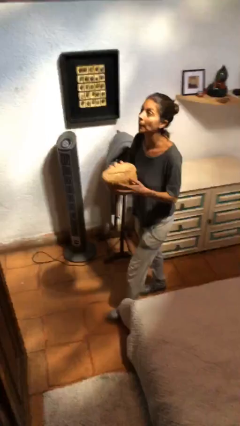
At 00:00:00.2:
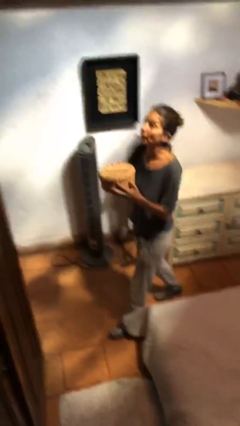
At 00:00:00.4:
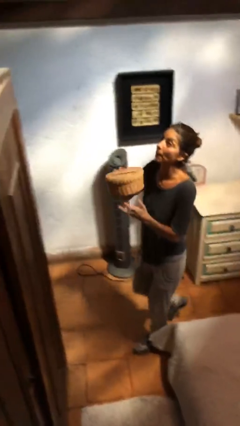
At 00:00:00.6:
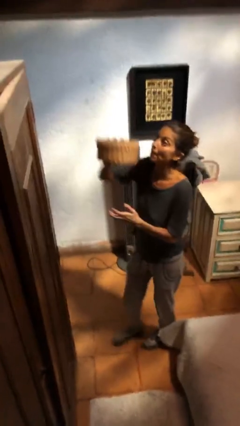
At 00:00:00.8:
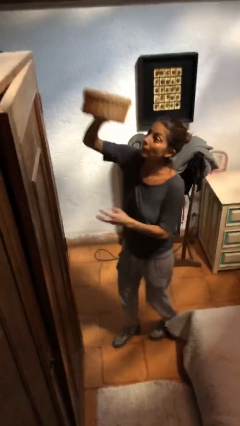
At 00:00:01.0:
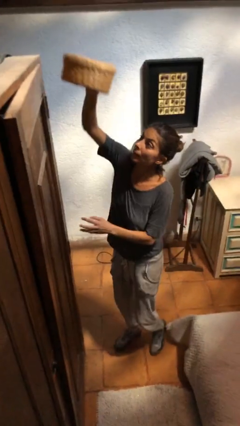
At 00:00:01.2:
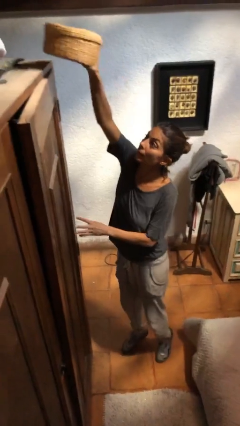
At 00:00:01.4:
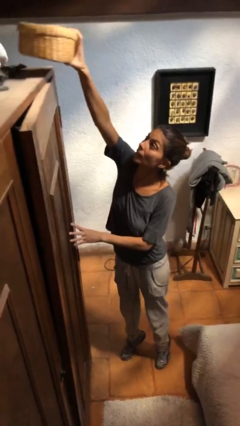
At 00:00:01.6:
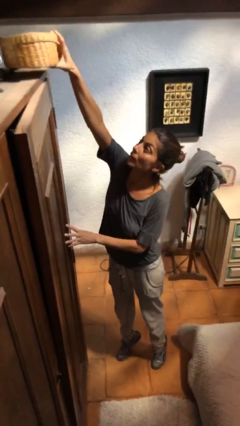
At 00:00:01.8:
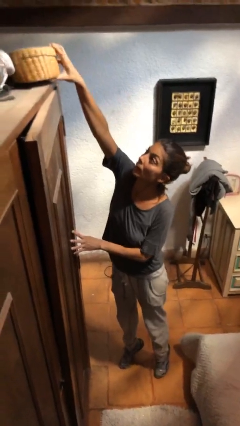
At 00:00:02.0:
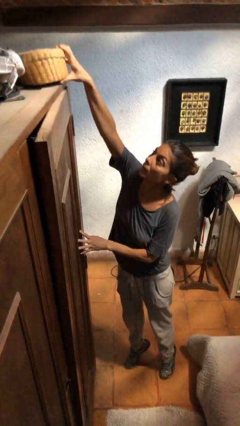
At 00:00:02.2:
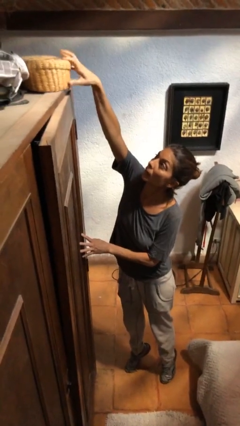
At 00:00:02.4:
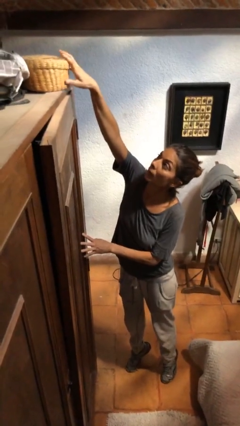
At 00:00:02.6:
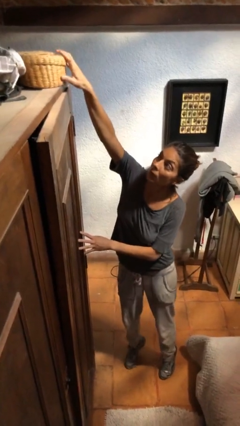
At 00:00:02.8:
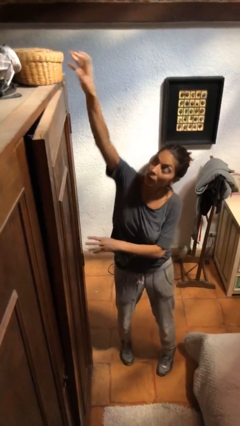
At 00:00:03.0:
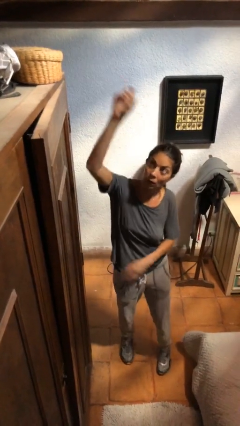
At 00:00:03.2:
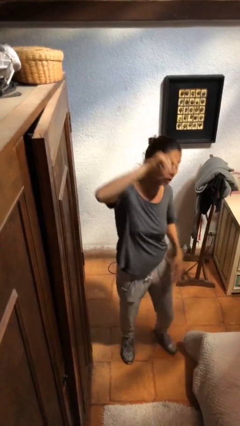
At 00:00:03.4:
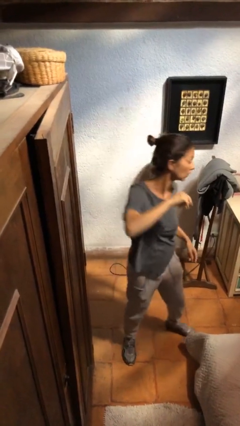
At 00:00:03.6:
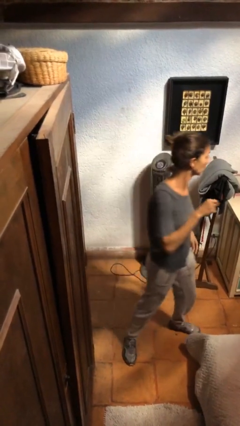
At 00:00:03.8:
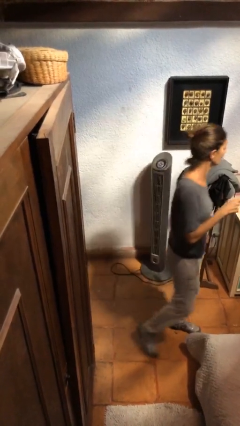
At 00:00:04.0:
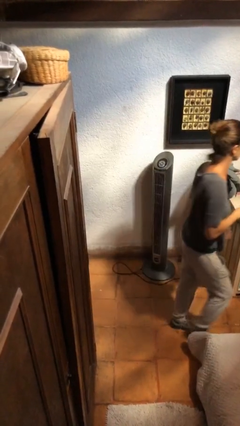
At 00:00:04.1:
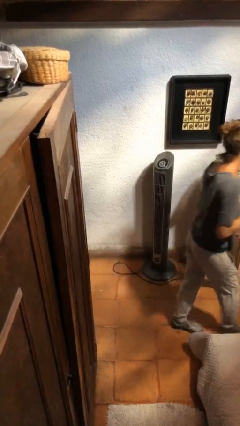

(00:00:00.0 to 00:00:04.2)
person puts down object on shelf

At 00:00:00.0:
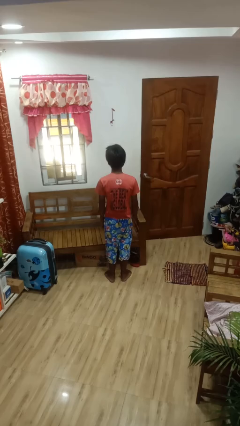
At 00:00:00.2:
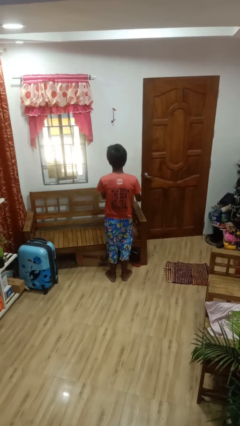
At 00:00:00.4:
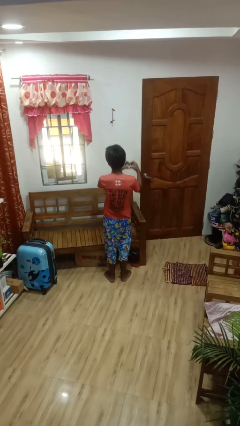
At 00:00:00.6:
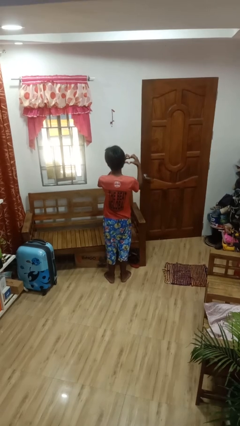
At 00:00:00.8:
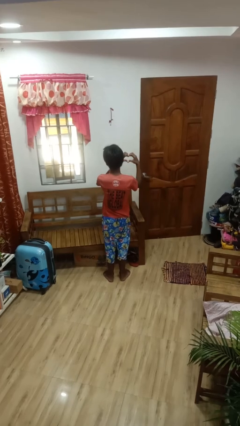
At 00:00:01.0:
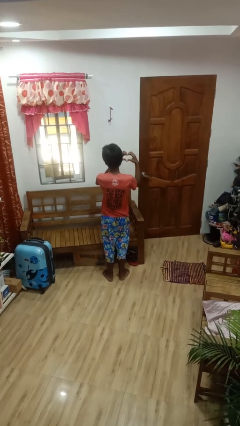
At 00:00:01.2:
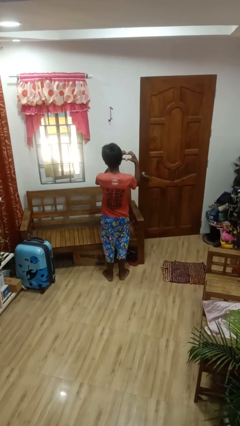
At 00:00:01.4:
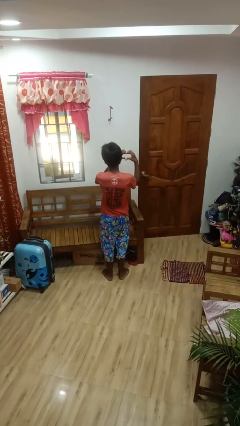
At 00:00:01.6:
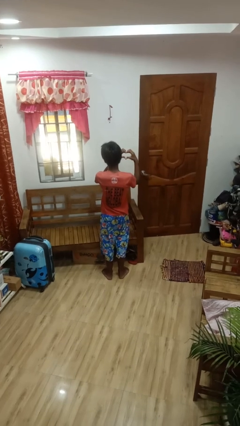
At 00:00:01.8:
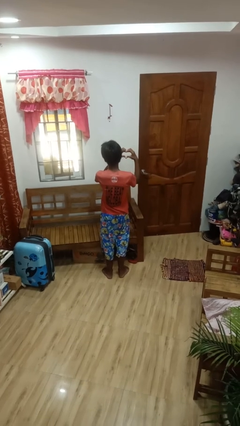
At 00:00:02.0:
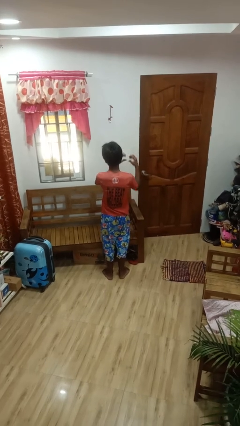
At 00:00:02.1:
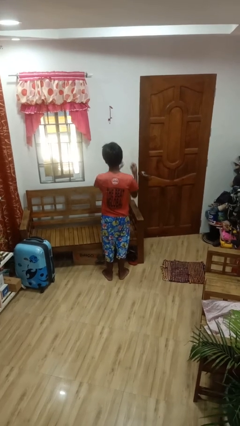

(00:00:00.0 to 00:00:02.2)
person gestures heart

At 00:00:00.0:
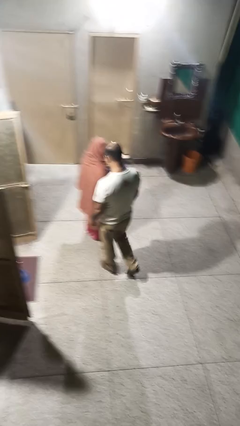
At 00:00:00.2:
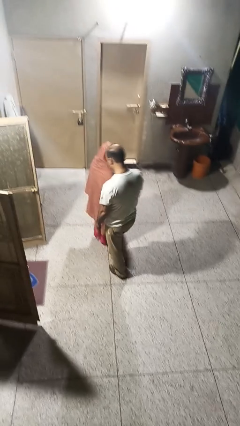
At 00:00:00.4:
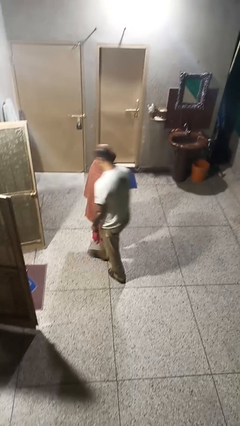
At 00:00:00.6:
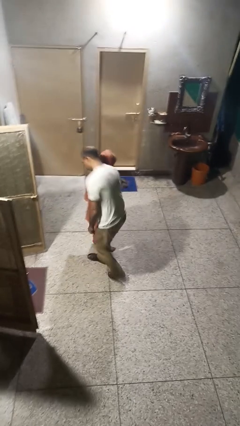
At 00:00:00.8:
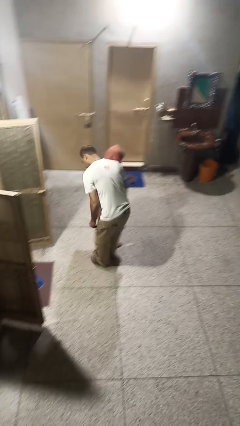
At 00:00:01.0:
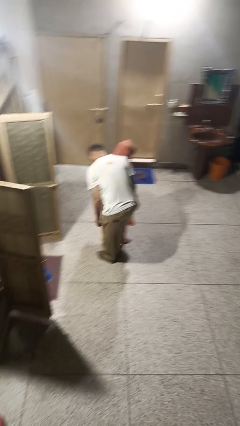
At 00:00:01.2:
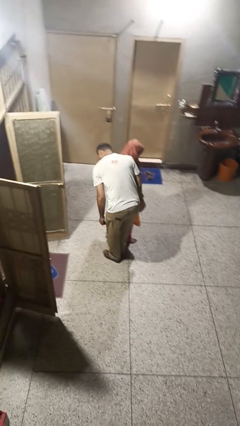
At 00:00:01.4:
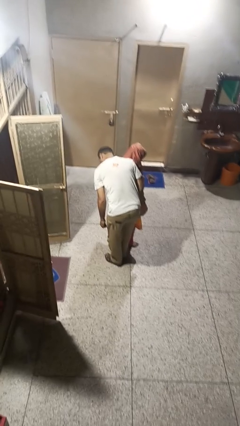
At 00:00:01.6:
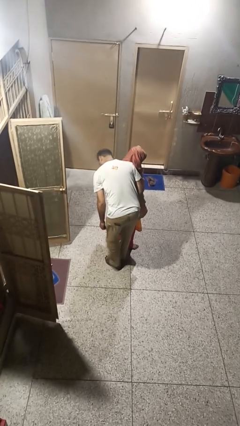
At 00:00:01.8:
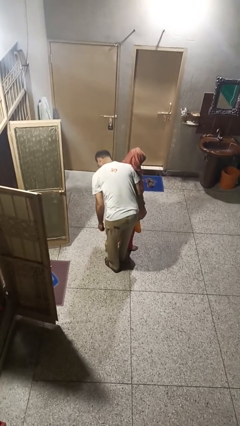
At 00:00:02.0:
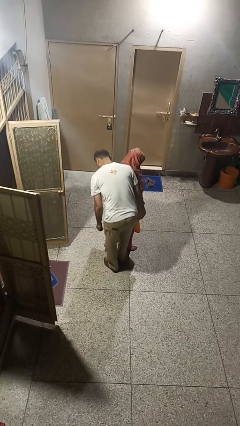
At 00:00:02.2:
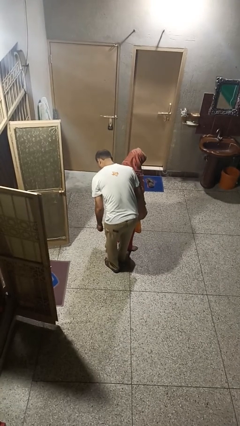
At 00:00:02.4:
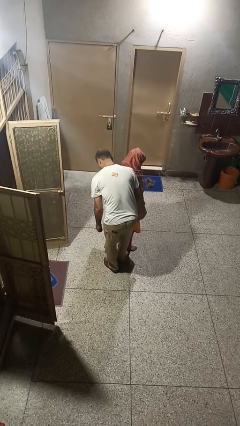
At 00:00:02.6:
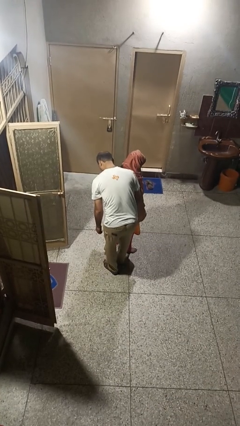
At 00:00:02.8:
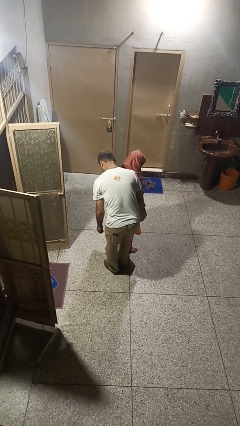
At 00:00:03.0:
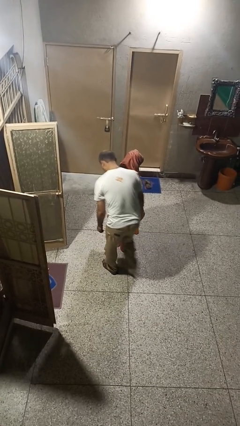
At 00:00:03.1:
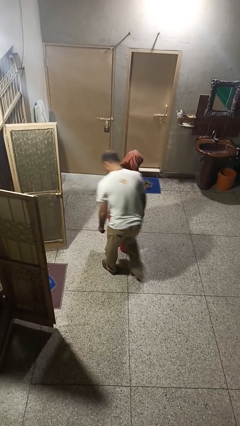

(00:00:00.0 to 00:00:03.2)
person bumps into person

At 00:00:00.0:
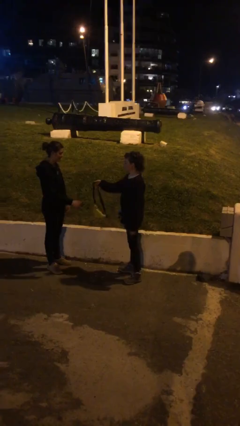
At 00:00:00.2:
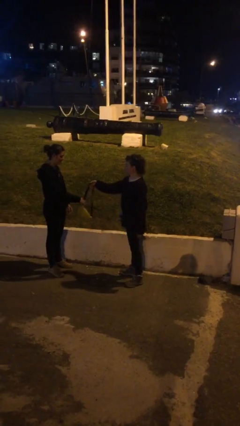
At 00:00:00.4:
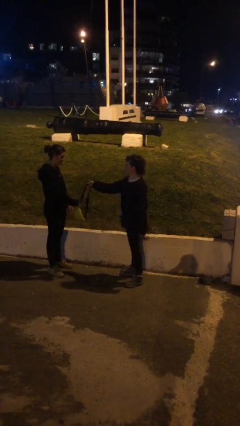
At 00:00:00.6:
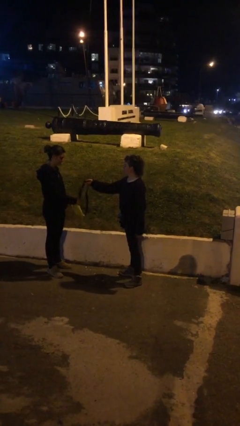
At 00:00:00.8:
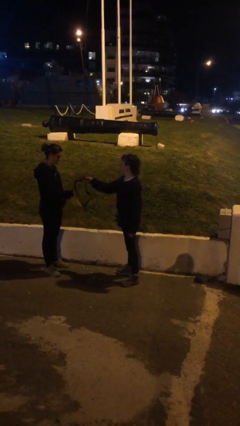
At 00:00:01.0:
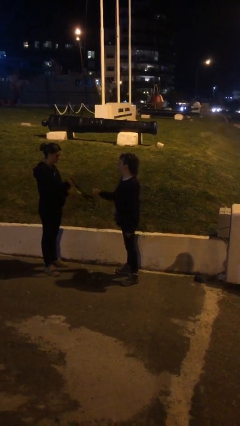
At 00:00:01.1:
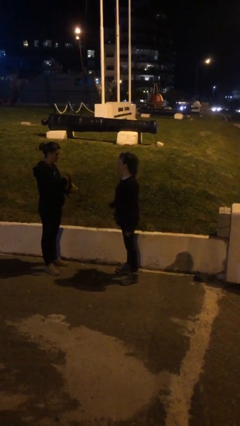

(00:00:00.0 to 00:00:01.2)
person transfers object to person

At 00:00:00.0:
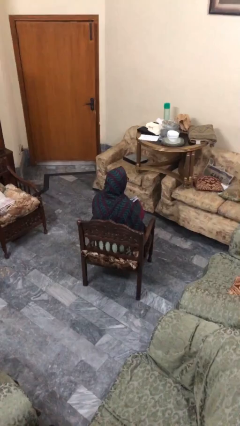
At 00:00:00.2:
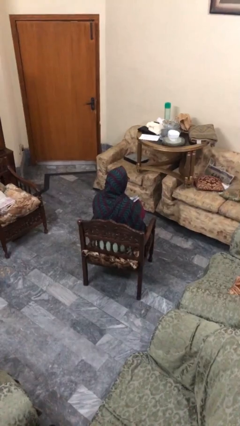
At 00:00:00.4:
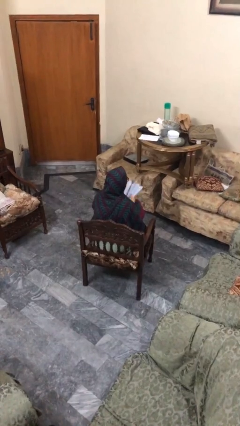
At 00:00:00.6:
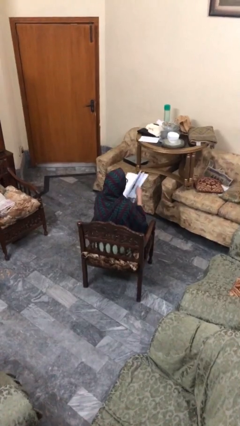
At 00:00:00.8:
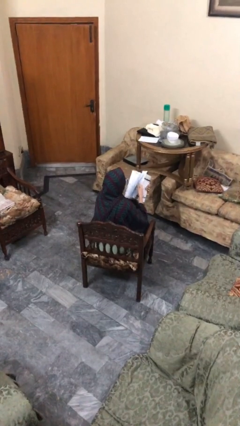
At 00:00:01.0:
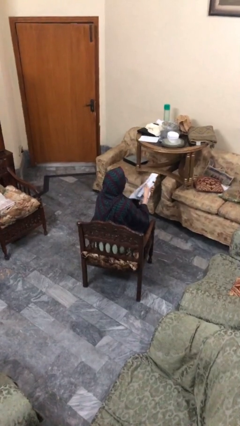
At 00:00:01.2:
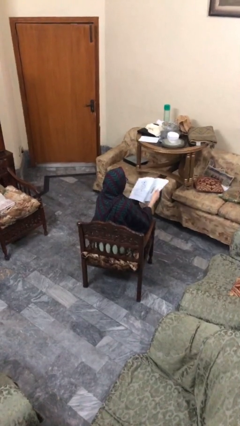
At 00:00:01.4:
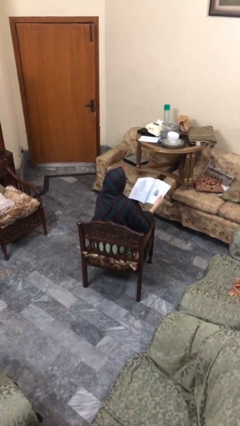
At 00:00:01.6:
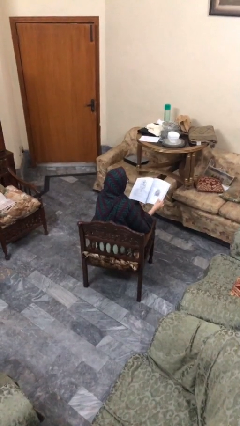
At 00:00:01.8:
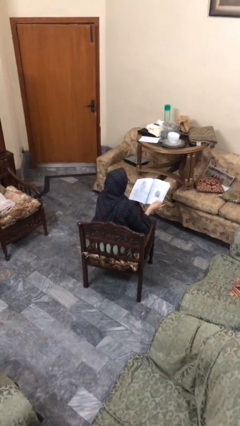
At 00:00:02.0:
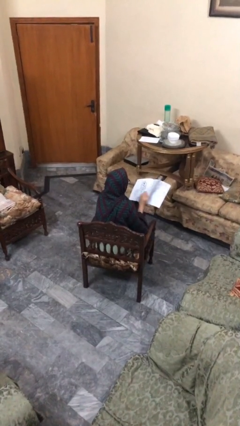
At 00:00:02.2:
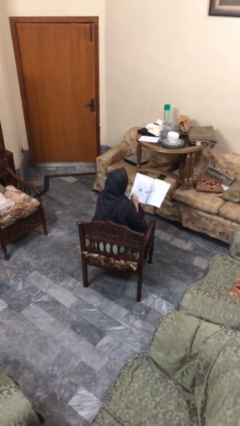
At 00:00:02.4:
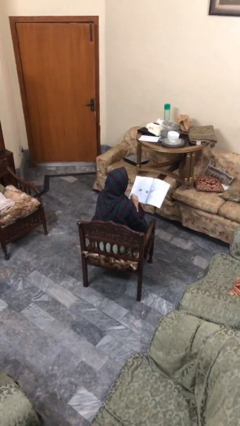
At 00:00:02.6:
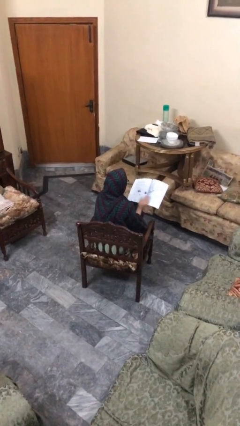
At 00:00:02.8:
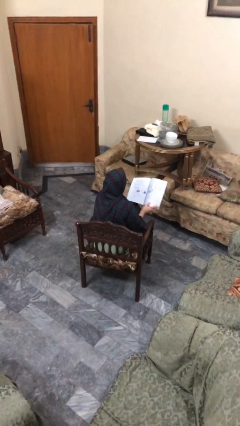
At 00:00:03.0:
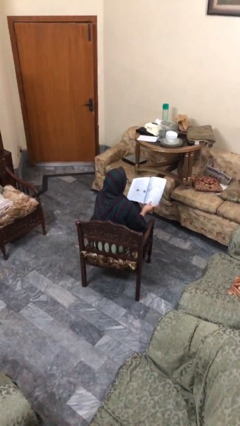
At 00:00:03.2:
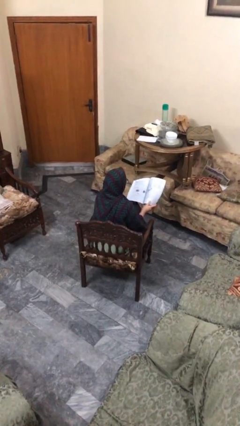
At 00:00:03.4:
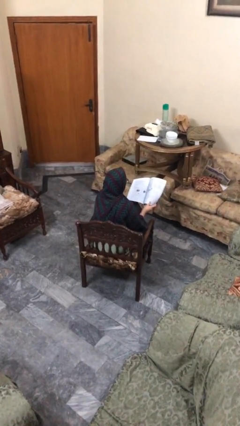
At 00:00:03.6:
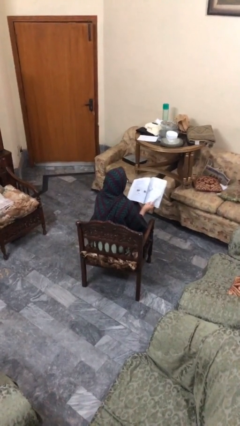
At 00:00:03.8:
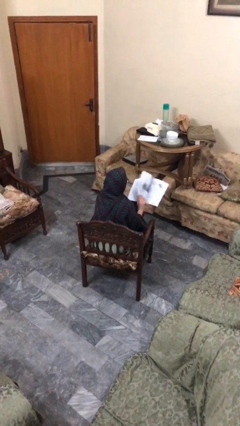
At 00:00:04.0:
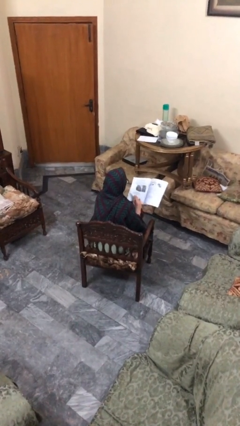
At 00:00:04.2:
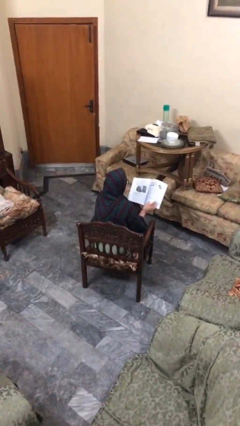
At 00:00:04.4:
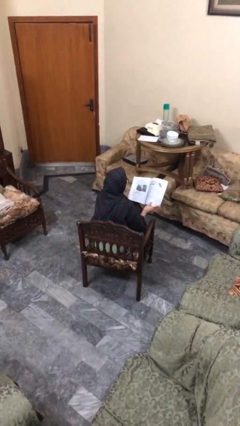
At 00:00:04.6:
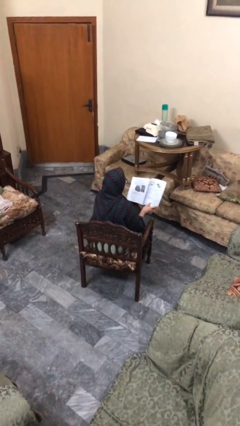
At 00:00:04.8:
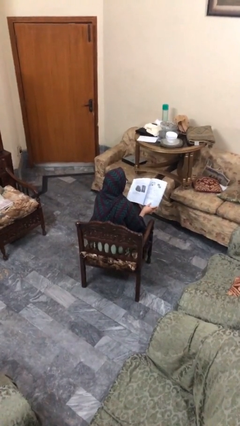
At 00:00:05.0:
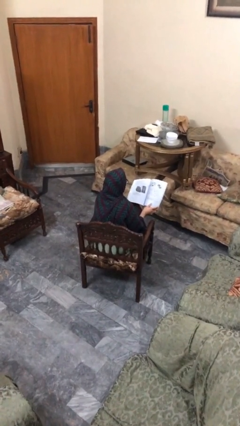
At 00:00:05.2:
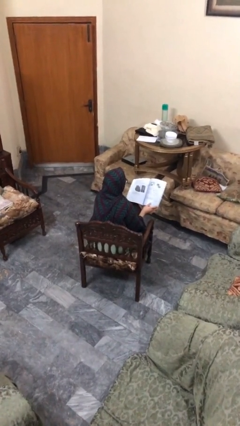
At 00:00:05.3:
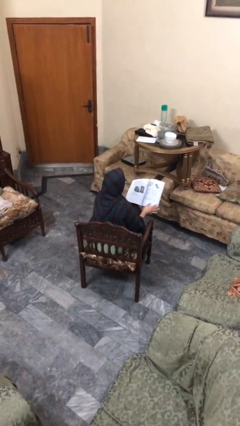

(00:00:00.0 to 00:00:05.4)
person reads book

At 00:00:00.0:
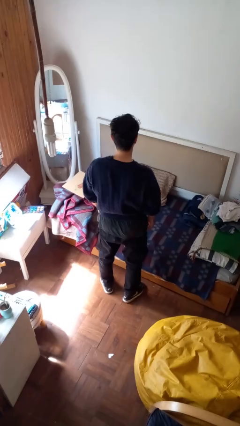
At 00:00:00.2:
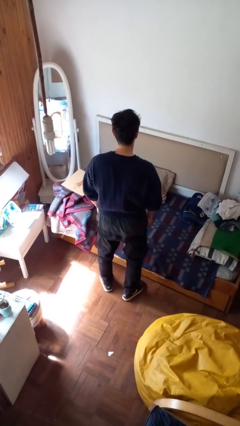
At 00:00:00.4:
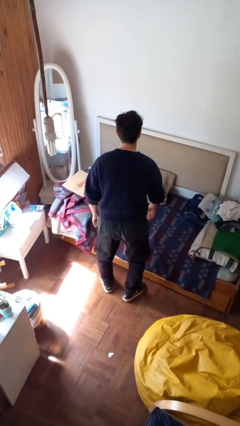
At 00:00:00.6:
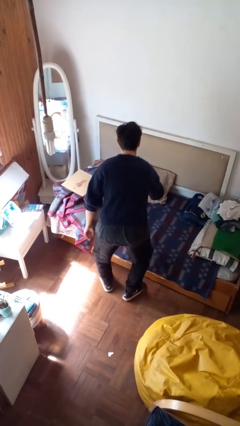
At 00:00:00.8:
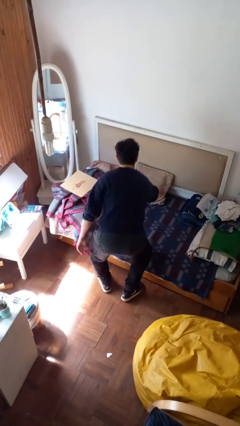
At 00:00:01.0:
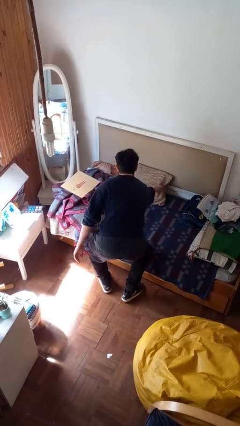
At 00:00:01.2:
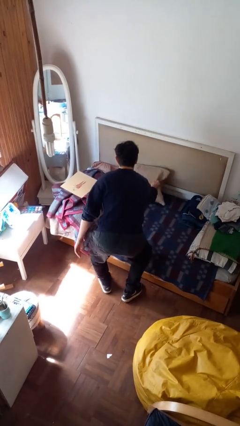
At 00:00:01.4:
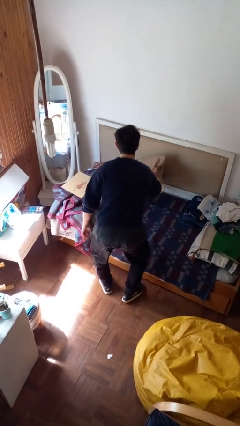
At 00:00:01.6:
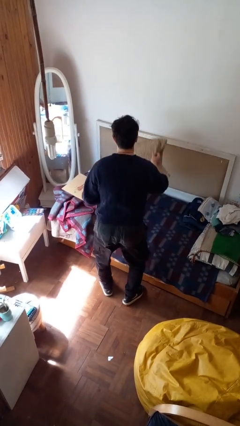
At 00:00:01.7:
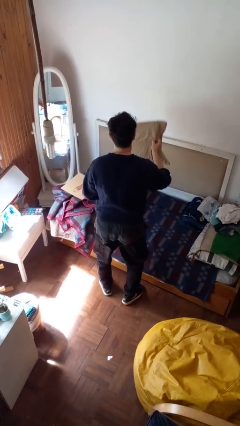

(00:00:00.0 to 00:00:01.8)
person picks up object from bed
